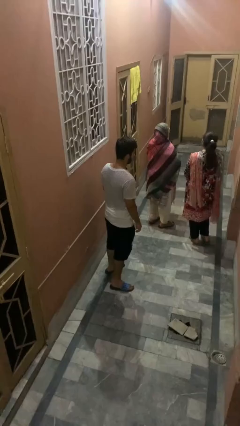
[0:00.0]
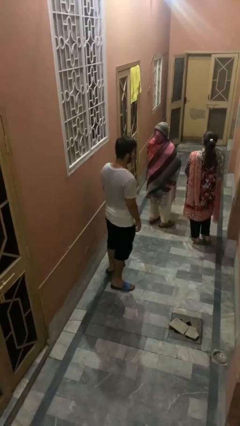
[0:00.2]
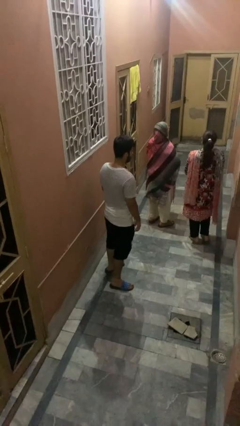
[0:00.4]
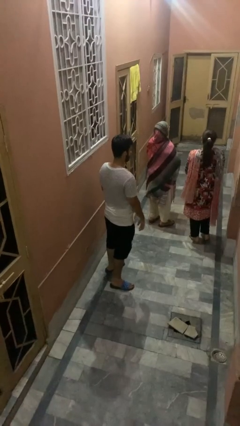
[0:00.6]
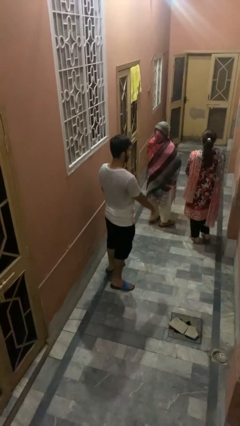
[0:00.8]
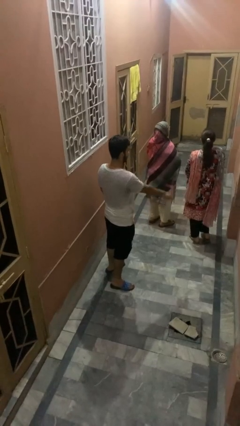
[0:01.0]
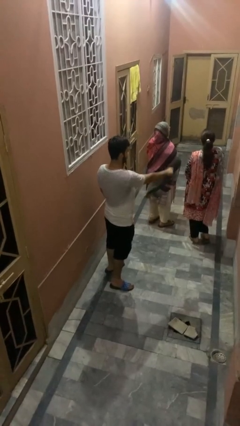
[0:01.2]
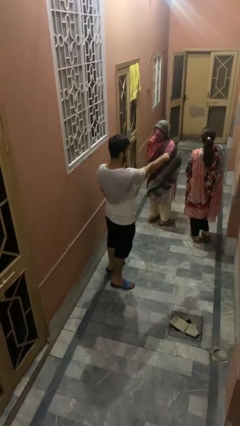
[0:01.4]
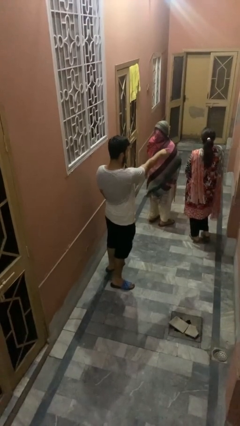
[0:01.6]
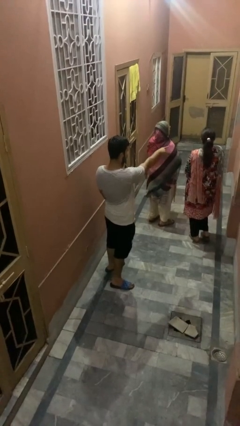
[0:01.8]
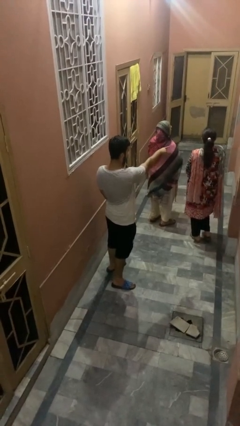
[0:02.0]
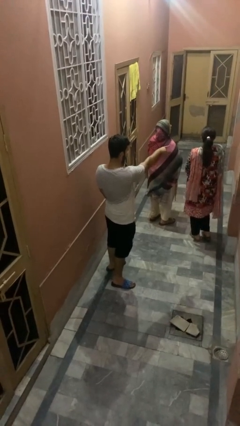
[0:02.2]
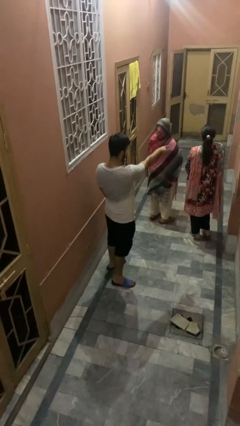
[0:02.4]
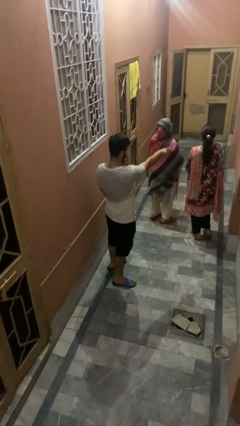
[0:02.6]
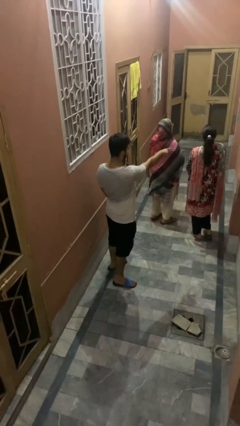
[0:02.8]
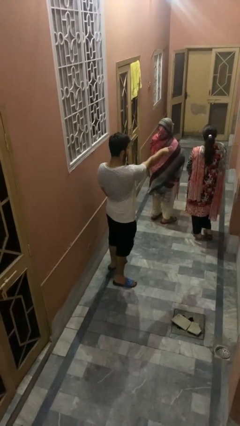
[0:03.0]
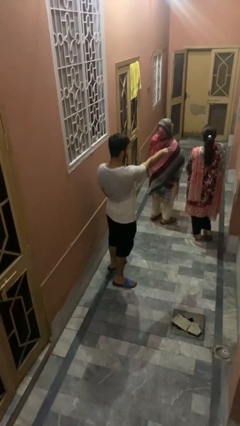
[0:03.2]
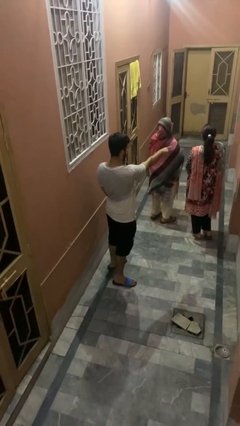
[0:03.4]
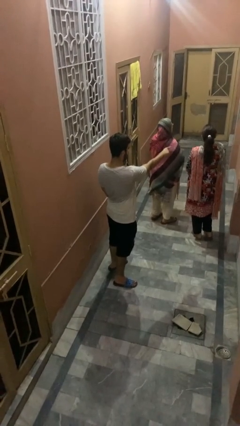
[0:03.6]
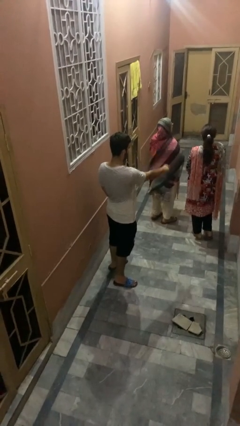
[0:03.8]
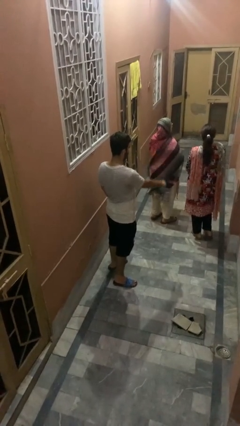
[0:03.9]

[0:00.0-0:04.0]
person points at person

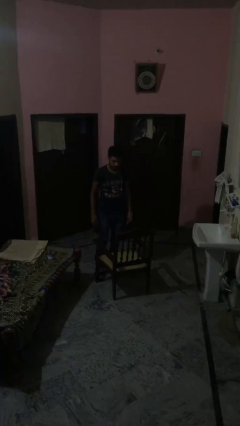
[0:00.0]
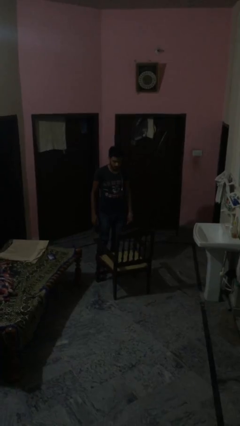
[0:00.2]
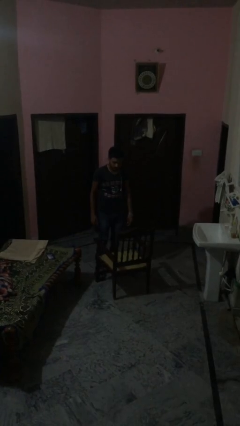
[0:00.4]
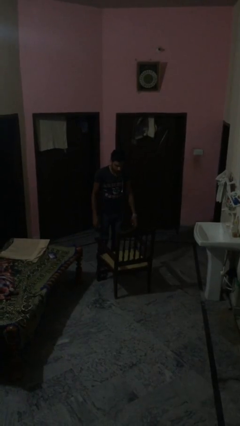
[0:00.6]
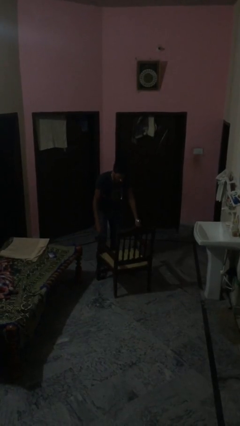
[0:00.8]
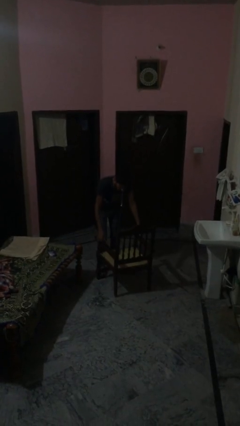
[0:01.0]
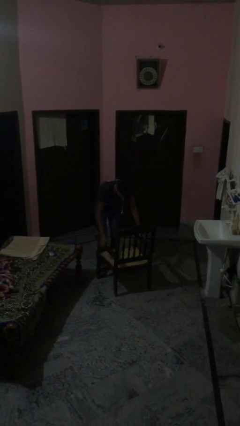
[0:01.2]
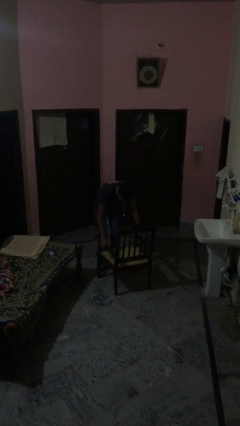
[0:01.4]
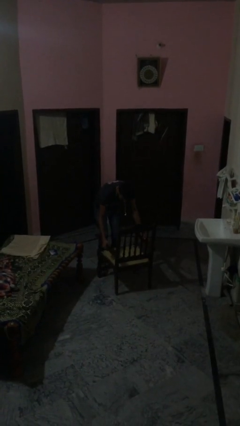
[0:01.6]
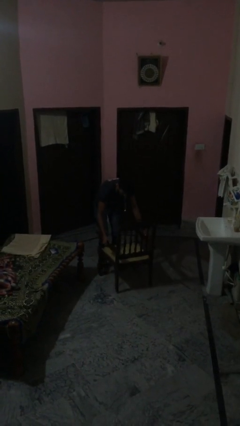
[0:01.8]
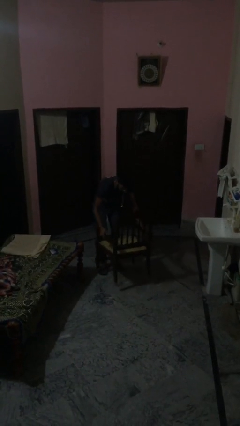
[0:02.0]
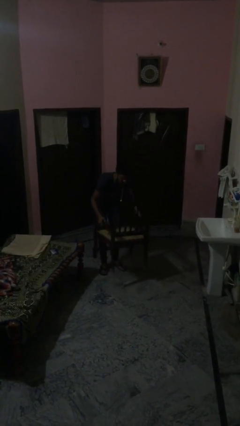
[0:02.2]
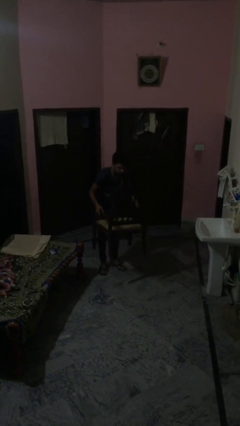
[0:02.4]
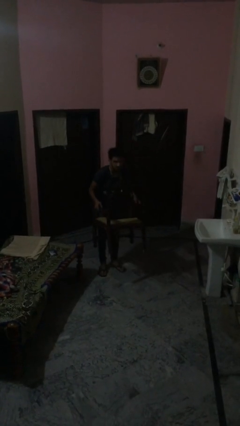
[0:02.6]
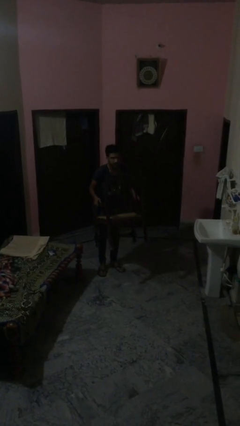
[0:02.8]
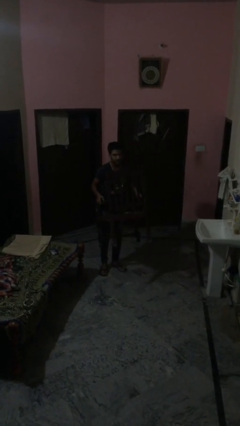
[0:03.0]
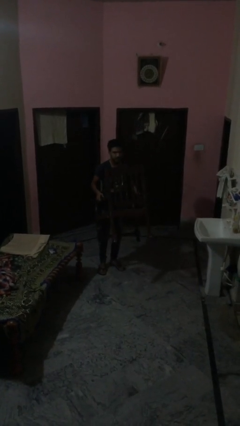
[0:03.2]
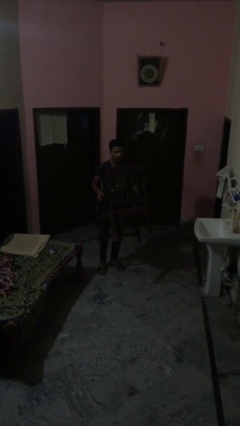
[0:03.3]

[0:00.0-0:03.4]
person picks up object from floor

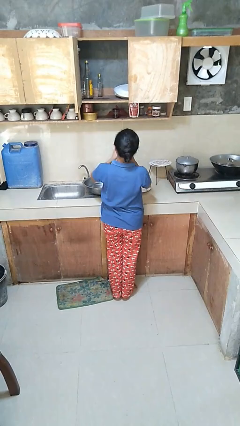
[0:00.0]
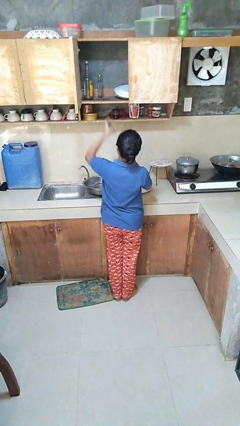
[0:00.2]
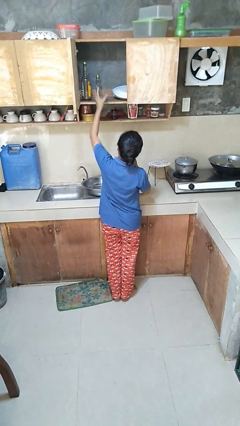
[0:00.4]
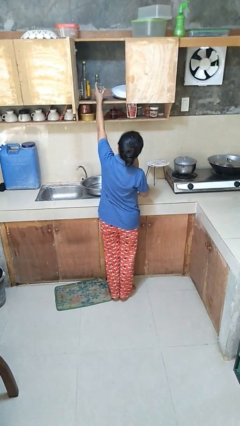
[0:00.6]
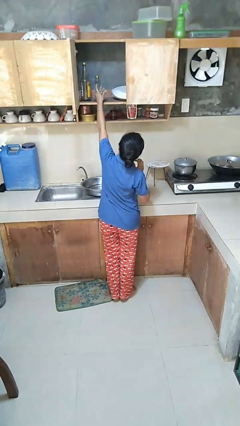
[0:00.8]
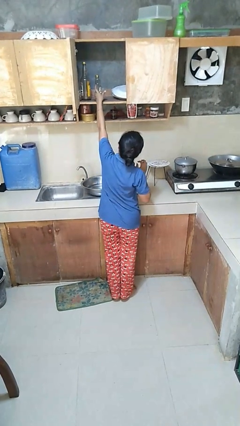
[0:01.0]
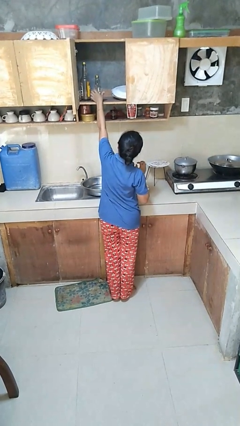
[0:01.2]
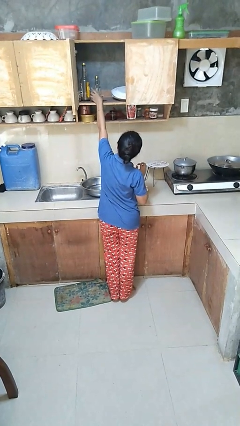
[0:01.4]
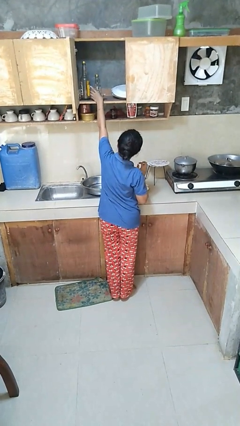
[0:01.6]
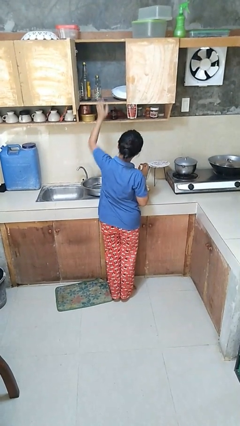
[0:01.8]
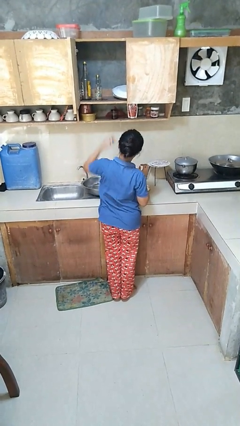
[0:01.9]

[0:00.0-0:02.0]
person puts object in cabinet

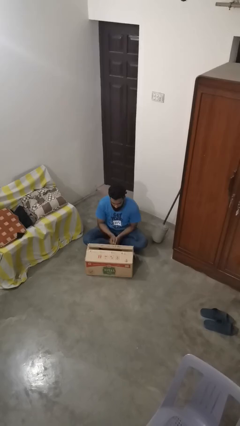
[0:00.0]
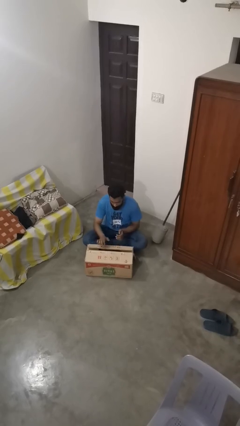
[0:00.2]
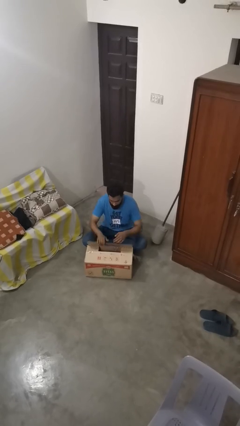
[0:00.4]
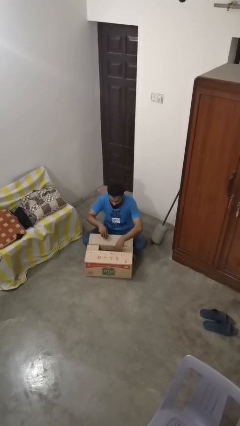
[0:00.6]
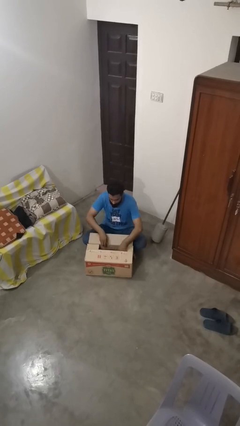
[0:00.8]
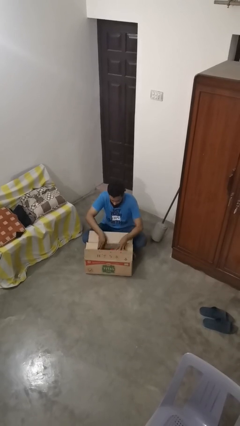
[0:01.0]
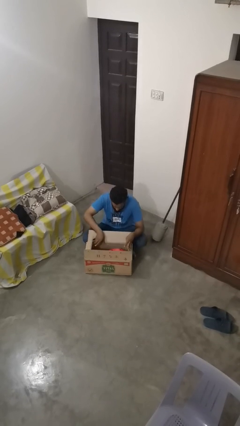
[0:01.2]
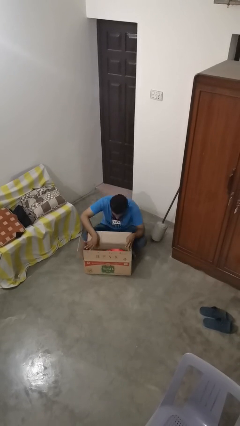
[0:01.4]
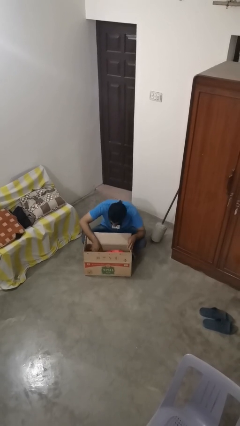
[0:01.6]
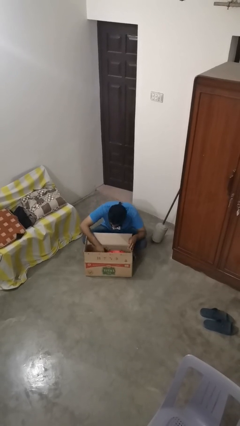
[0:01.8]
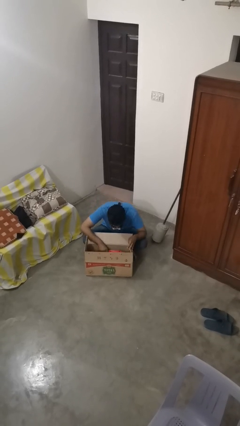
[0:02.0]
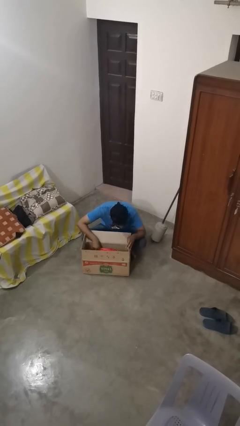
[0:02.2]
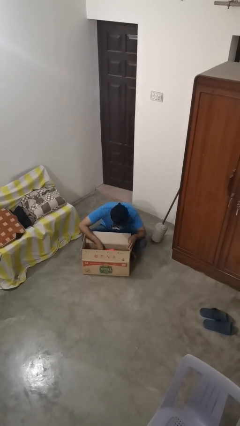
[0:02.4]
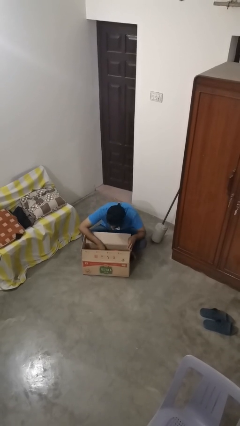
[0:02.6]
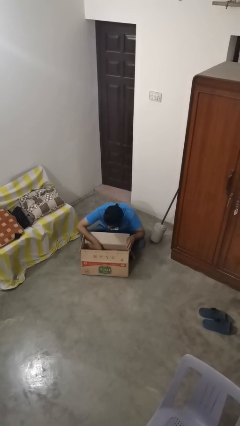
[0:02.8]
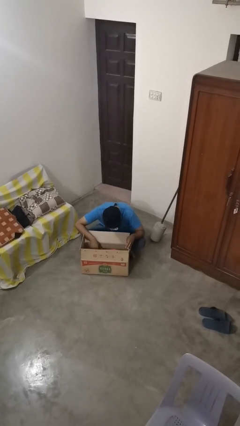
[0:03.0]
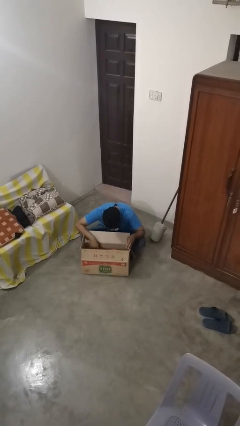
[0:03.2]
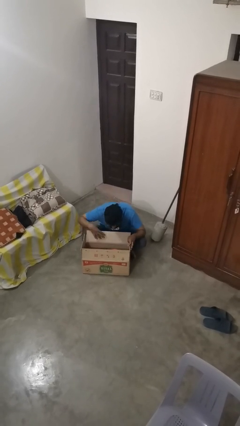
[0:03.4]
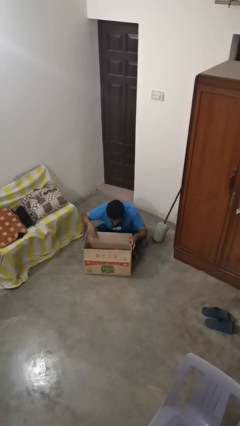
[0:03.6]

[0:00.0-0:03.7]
person searches in box

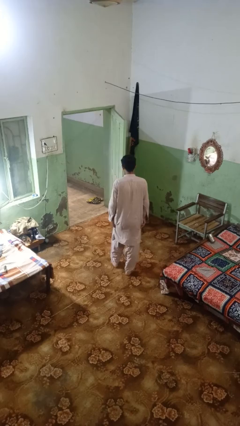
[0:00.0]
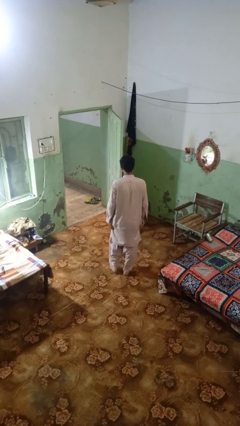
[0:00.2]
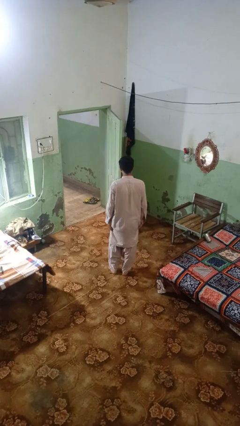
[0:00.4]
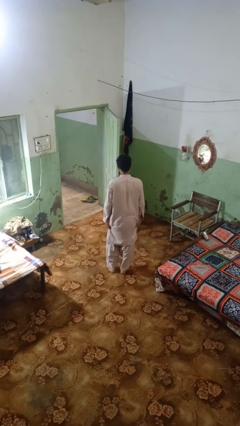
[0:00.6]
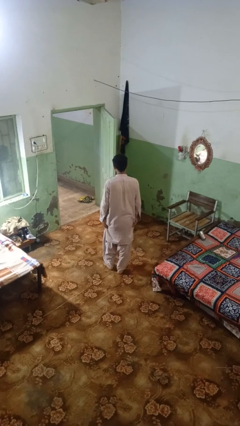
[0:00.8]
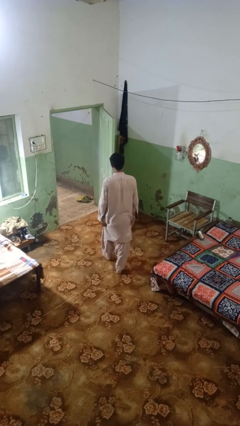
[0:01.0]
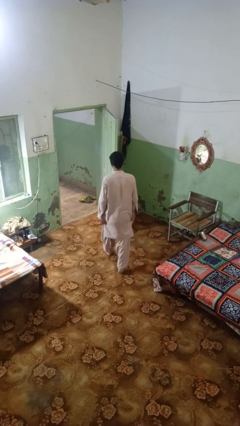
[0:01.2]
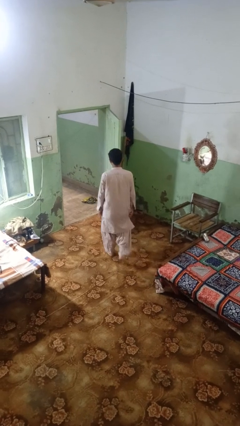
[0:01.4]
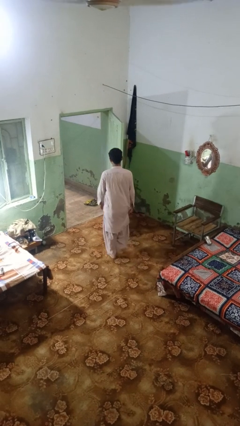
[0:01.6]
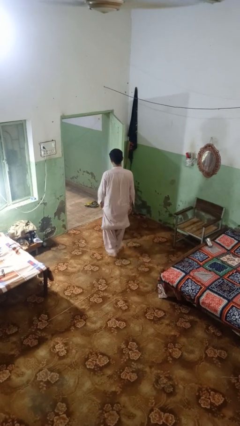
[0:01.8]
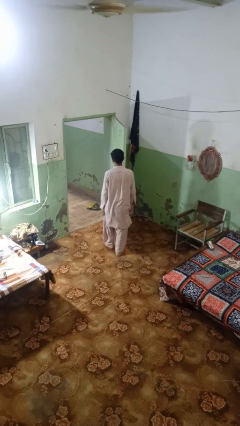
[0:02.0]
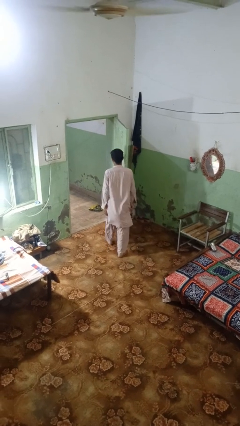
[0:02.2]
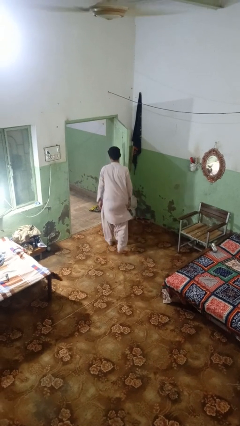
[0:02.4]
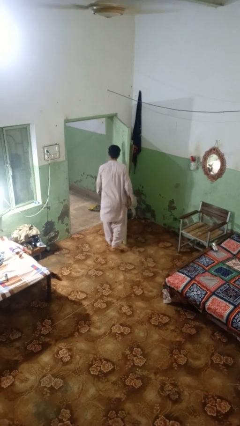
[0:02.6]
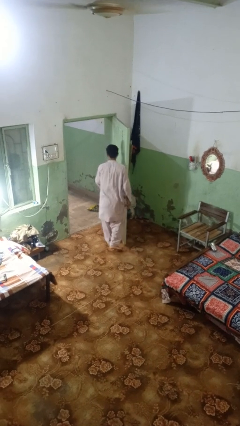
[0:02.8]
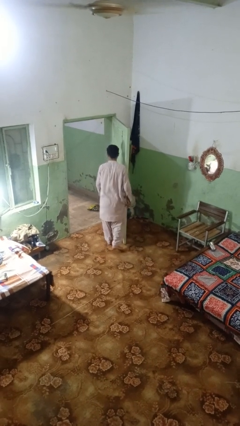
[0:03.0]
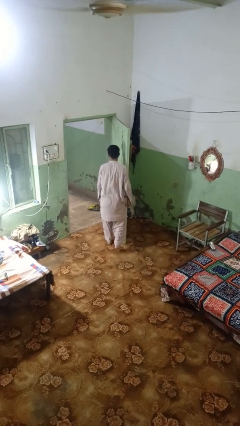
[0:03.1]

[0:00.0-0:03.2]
person bumps into wall

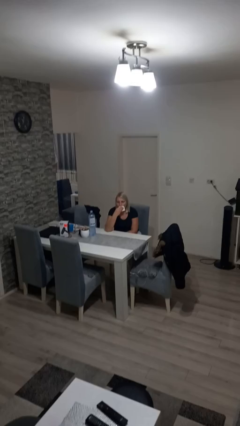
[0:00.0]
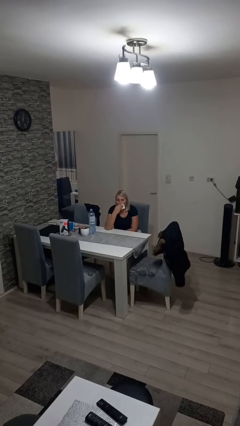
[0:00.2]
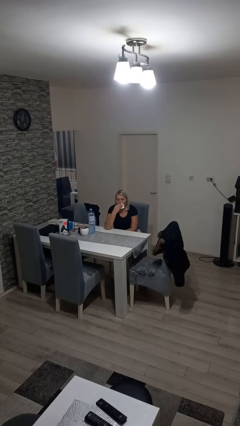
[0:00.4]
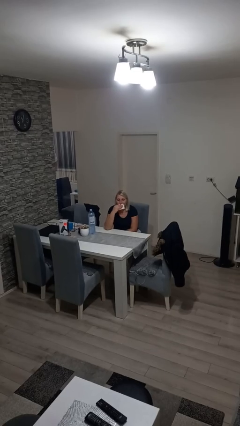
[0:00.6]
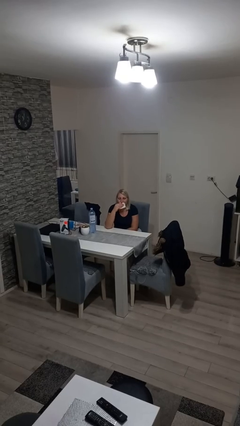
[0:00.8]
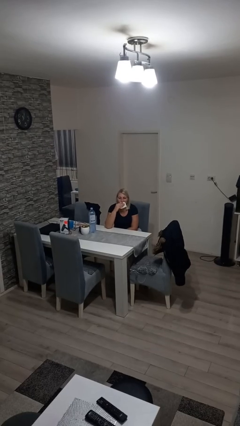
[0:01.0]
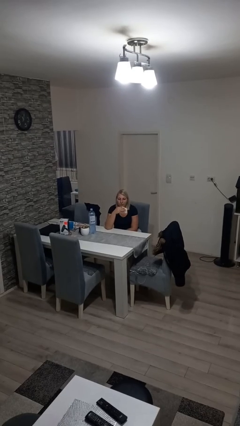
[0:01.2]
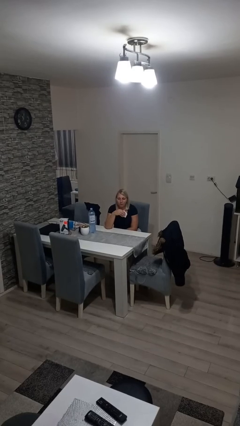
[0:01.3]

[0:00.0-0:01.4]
person wipes mouth with napkin
